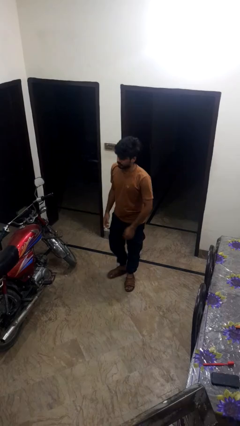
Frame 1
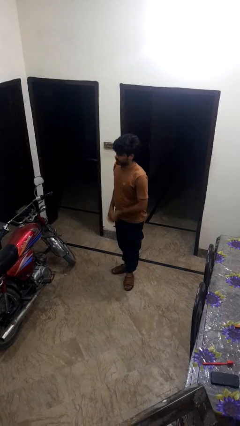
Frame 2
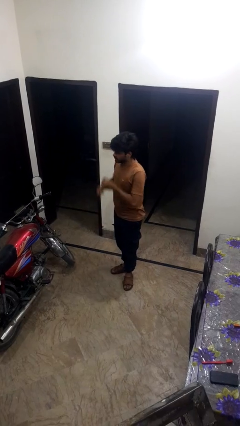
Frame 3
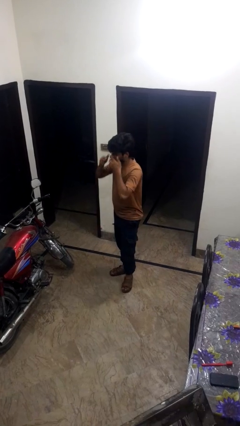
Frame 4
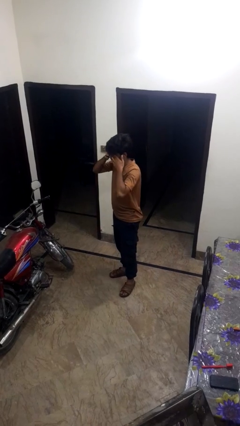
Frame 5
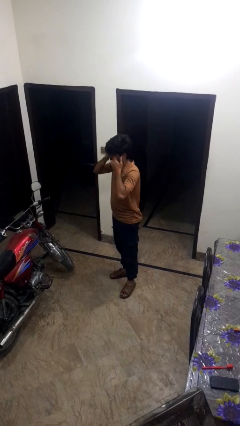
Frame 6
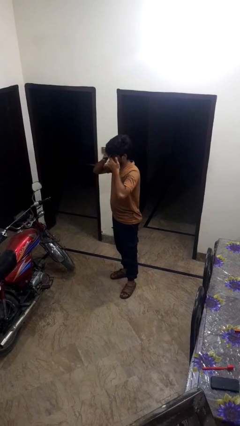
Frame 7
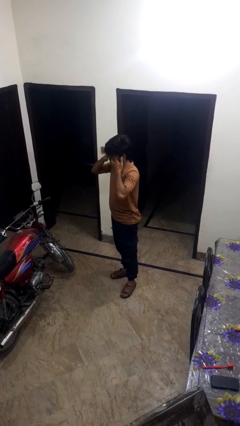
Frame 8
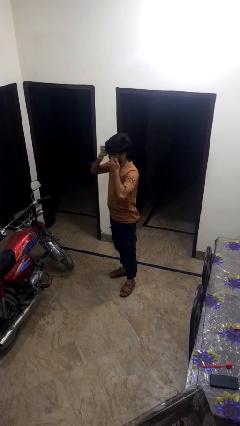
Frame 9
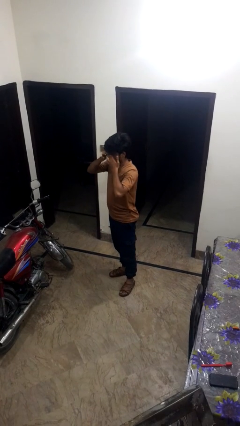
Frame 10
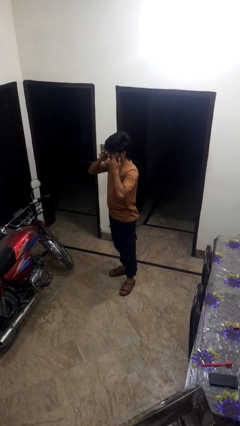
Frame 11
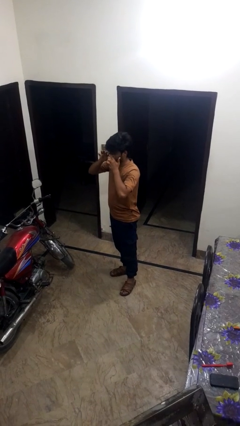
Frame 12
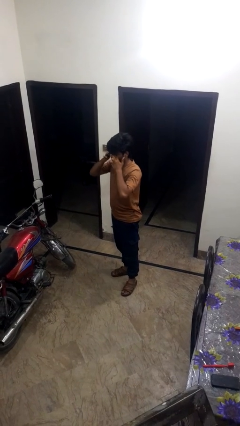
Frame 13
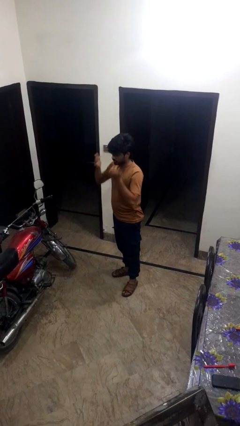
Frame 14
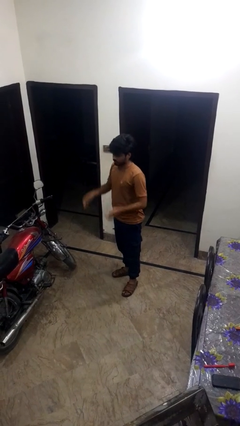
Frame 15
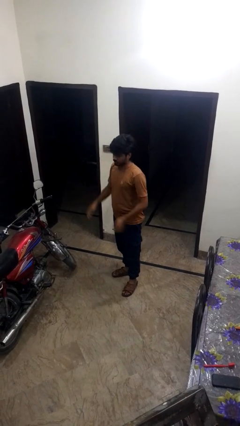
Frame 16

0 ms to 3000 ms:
person rubs eyes

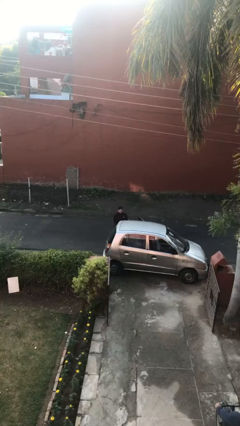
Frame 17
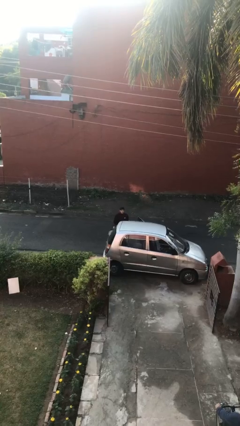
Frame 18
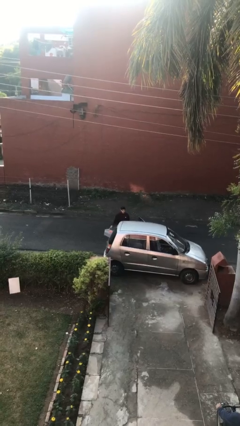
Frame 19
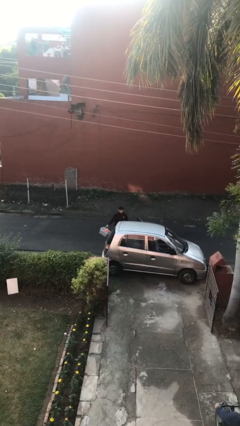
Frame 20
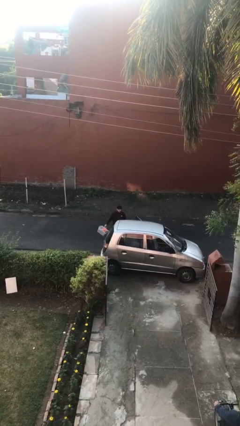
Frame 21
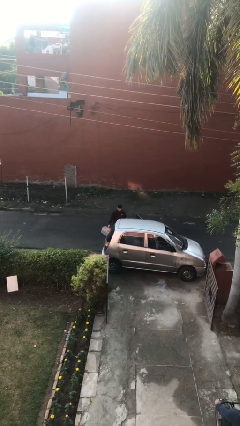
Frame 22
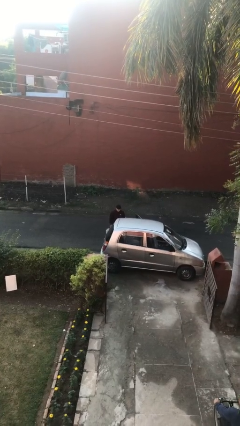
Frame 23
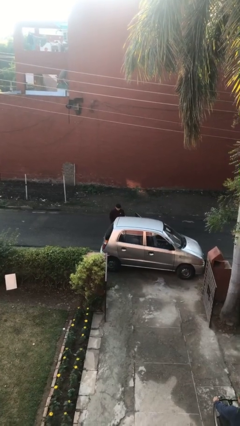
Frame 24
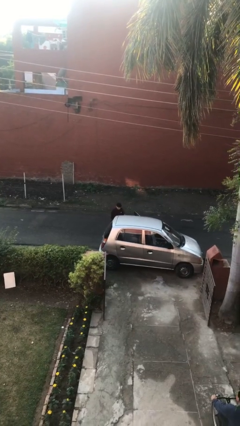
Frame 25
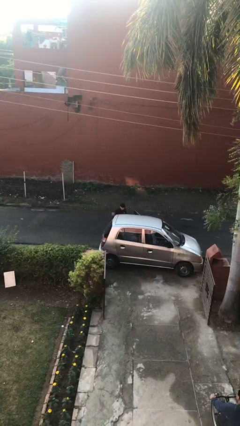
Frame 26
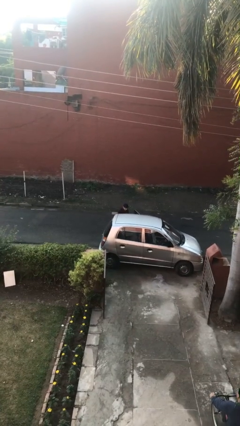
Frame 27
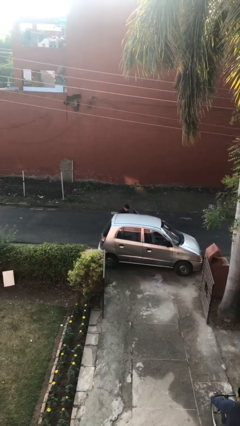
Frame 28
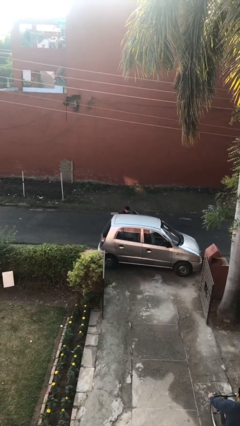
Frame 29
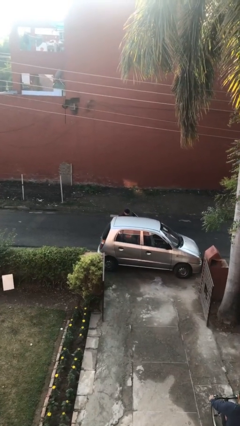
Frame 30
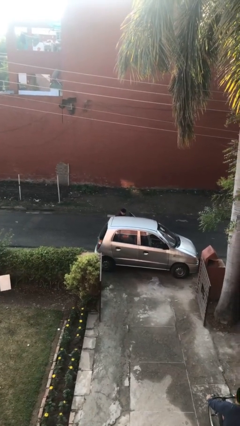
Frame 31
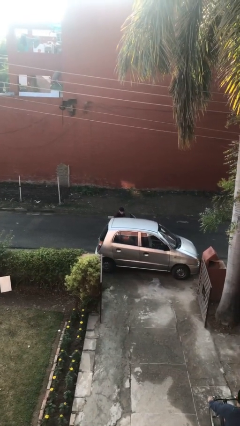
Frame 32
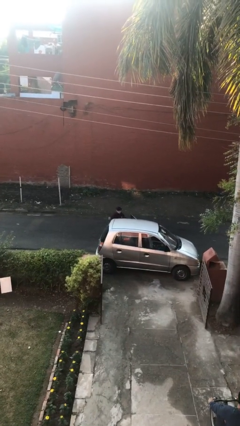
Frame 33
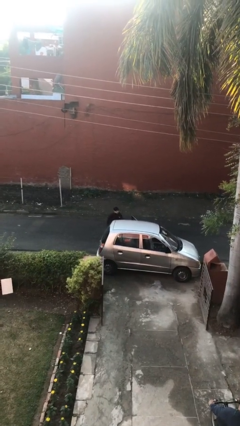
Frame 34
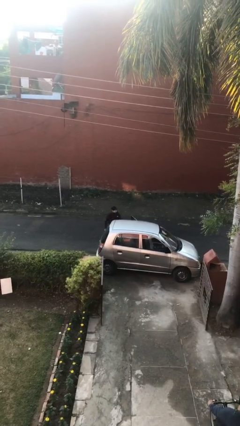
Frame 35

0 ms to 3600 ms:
person loads car

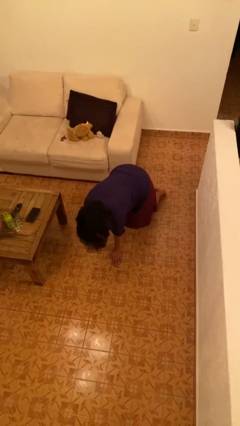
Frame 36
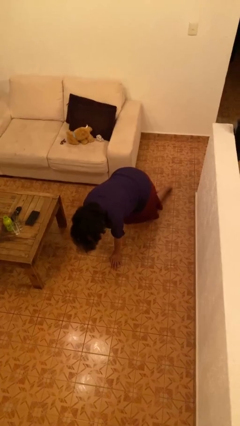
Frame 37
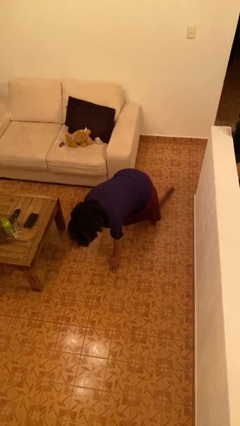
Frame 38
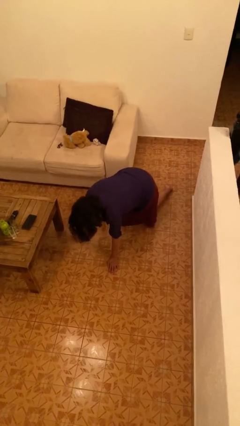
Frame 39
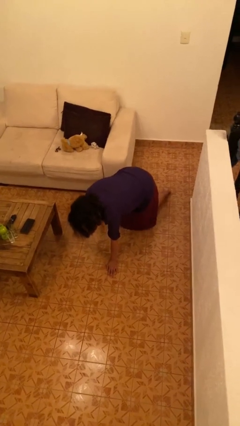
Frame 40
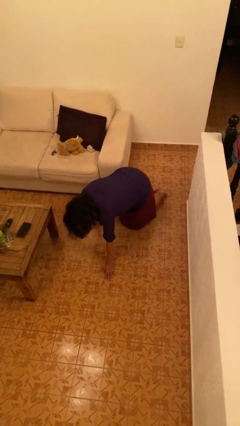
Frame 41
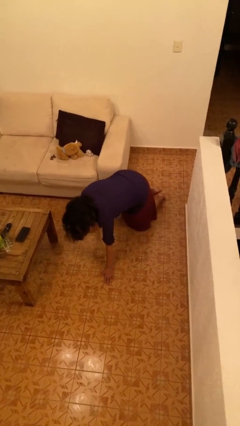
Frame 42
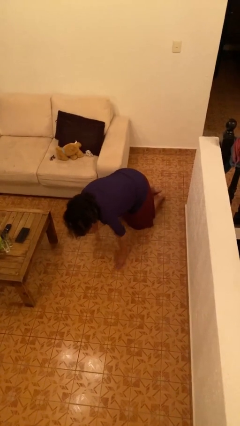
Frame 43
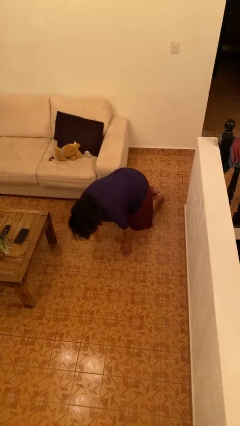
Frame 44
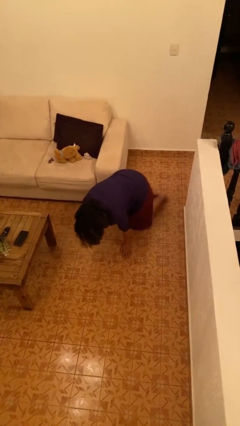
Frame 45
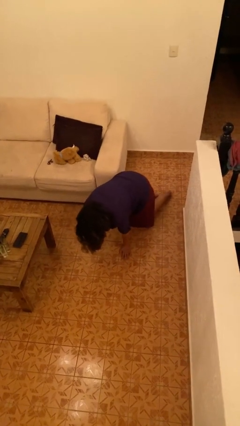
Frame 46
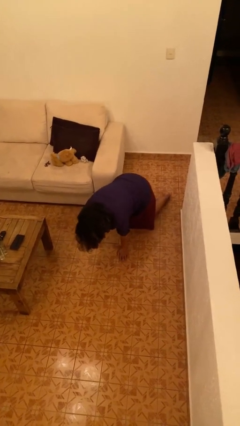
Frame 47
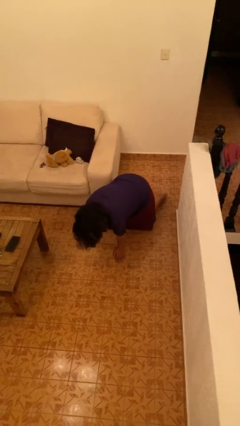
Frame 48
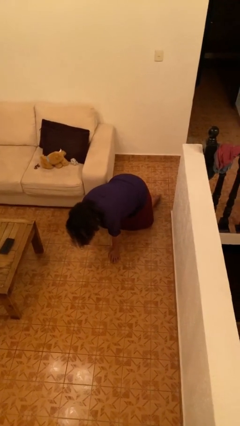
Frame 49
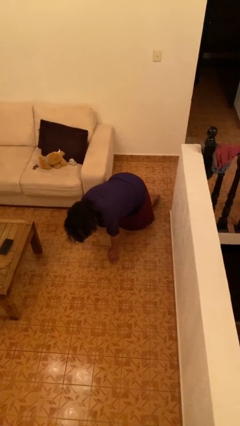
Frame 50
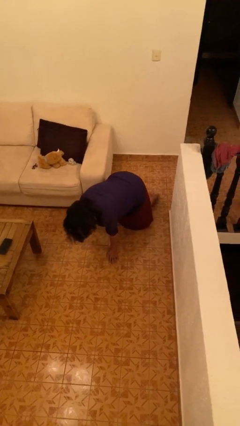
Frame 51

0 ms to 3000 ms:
person crawls

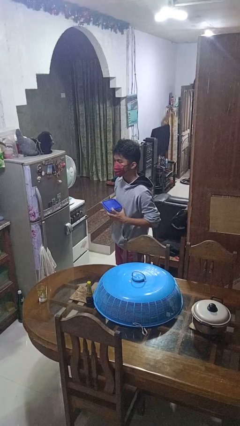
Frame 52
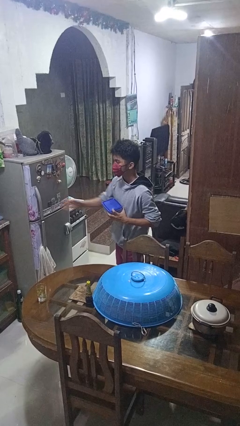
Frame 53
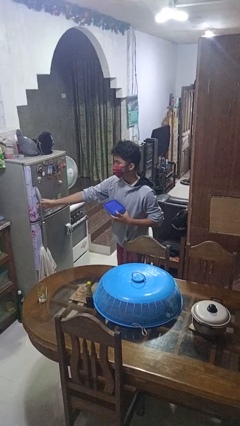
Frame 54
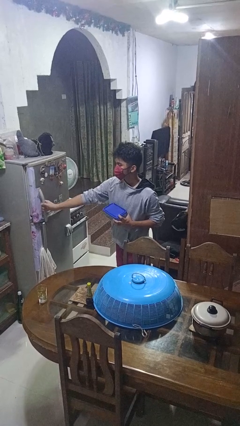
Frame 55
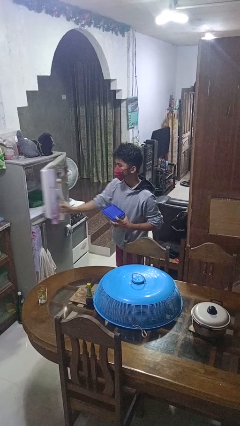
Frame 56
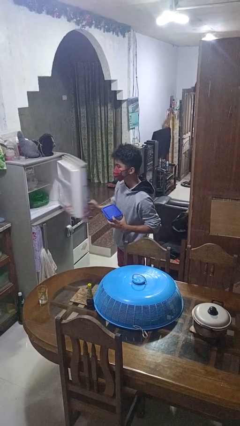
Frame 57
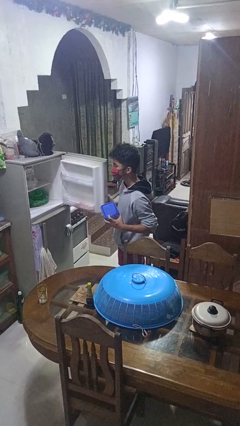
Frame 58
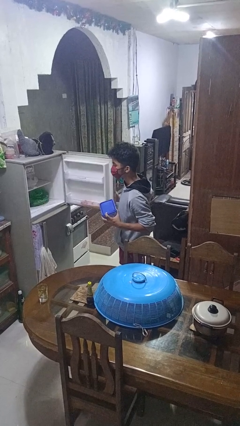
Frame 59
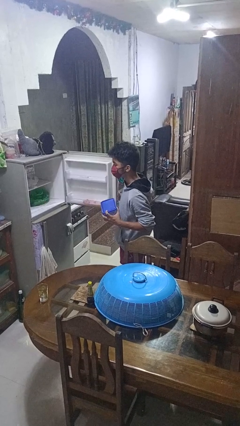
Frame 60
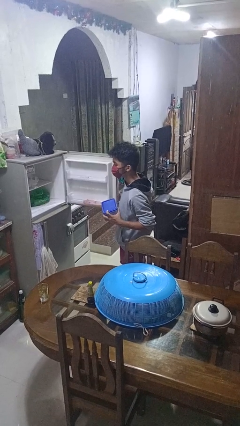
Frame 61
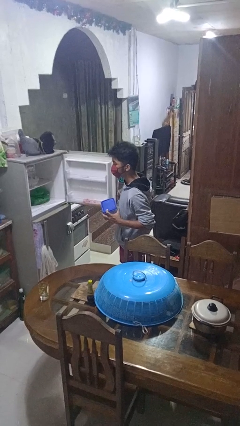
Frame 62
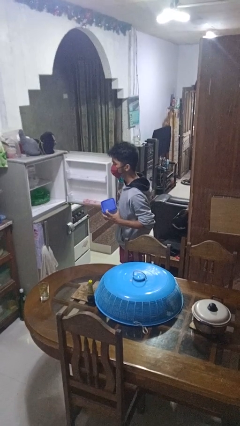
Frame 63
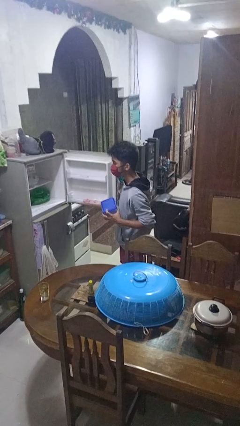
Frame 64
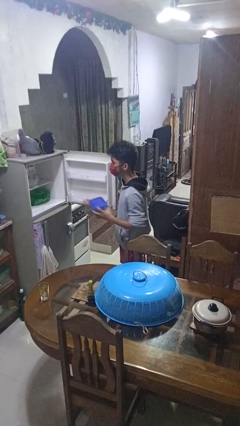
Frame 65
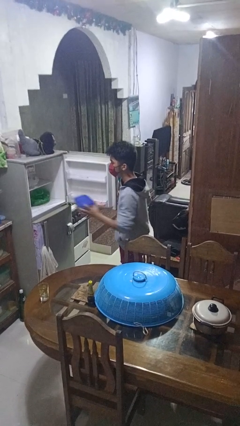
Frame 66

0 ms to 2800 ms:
person opens refrigerator

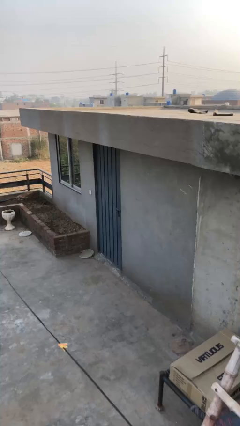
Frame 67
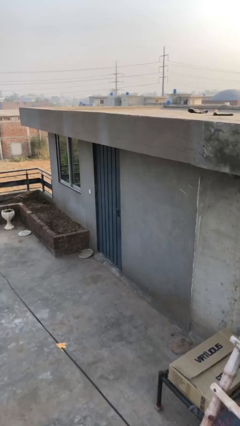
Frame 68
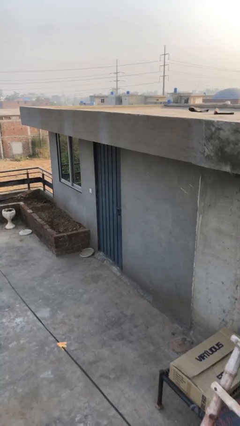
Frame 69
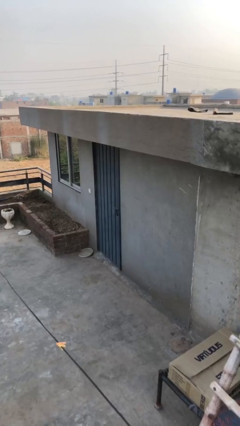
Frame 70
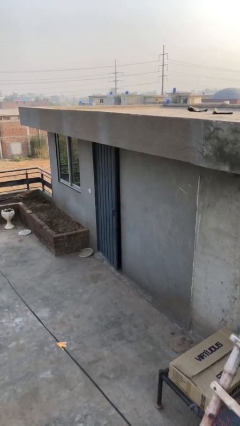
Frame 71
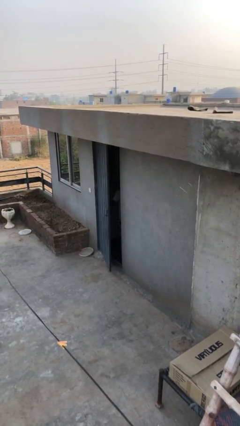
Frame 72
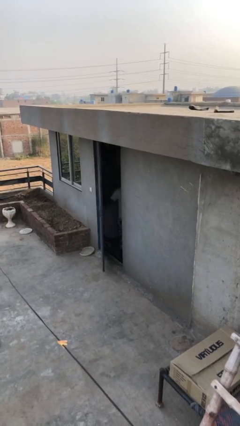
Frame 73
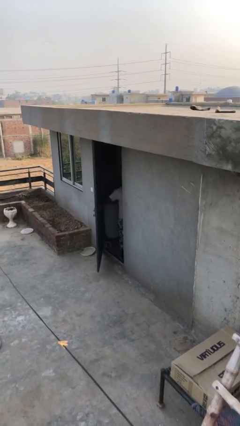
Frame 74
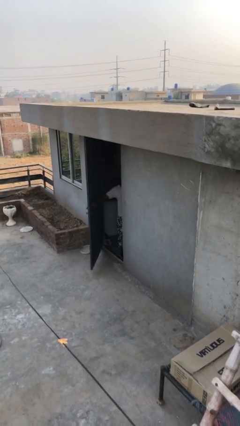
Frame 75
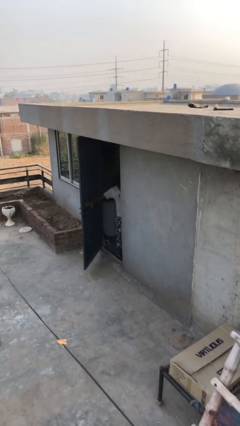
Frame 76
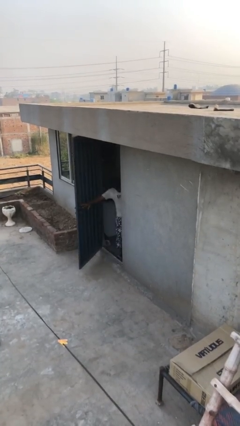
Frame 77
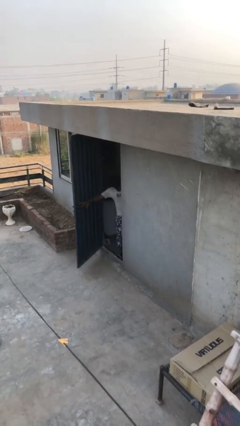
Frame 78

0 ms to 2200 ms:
person opens facility door

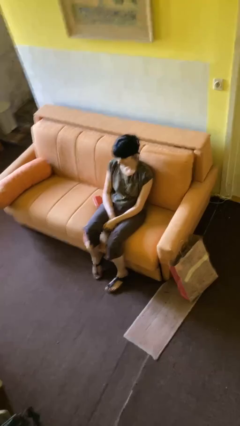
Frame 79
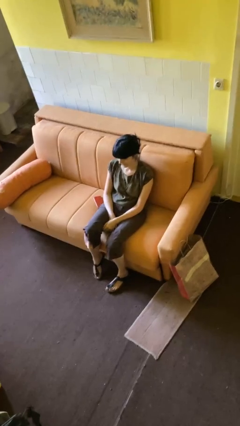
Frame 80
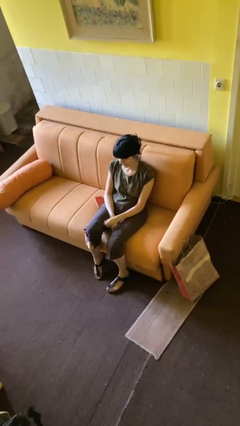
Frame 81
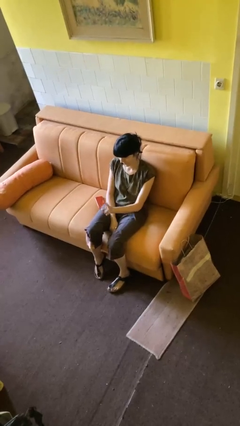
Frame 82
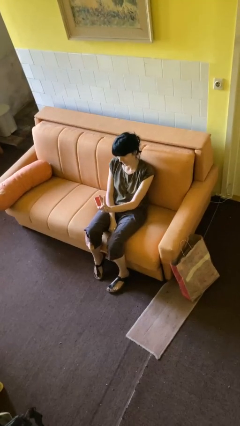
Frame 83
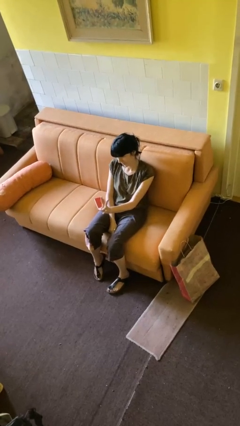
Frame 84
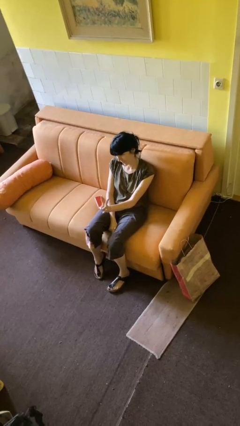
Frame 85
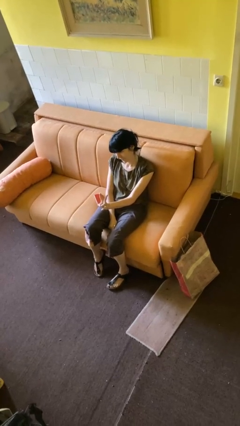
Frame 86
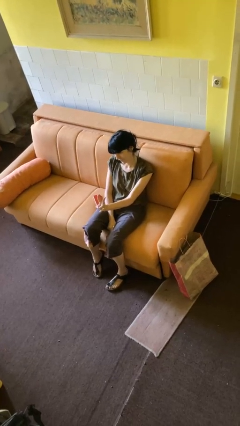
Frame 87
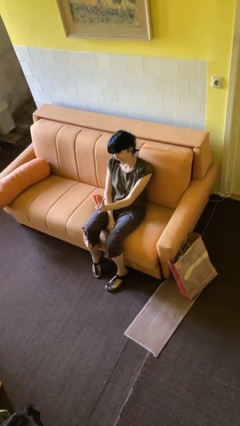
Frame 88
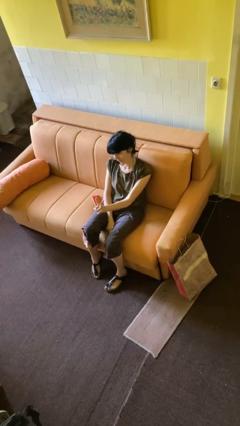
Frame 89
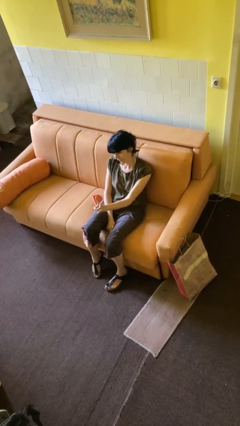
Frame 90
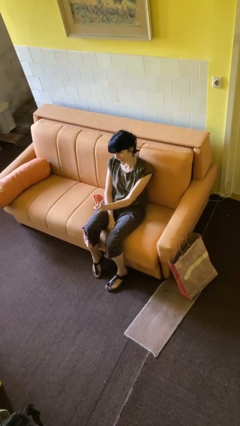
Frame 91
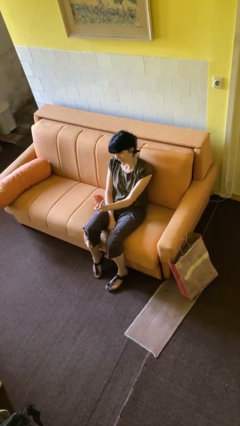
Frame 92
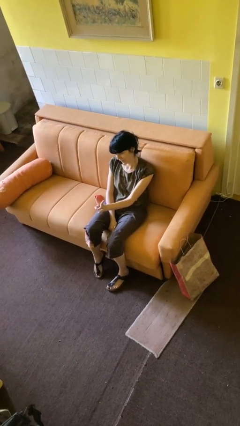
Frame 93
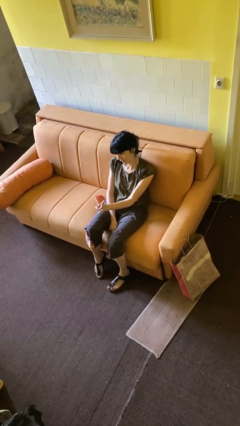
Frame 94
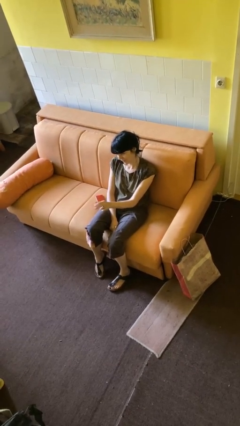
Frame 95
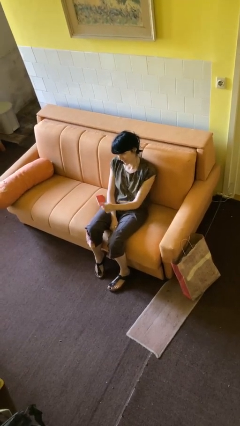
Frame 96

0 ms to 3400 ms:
person gestures peace
